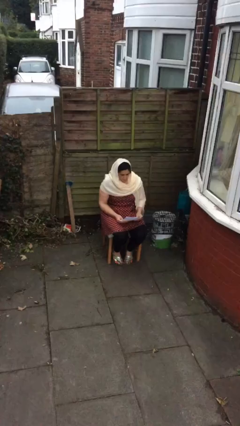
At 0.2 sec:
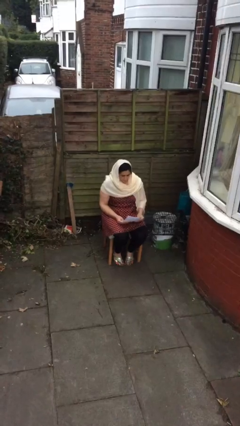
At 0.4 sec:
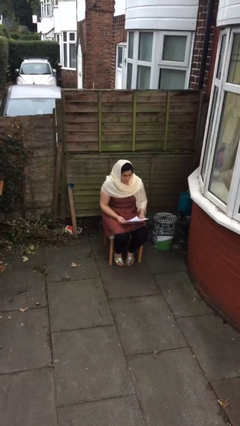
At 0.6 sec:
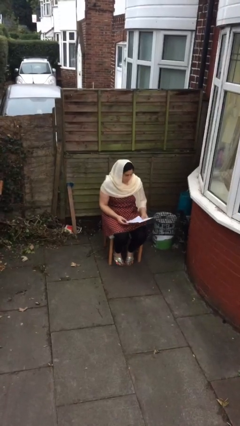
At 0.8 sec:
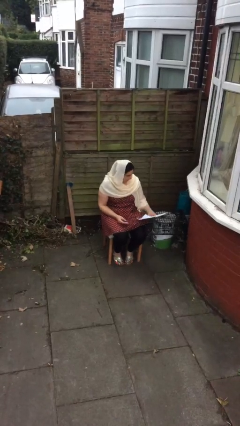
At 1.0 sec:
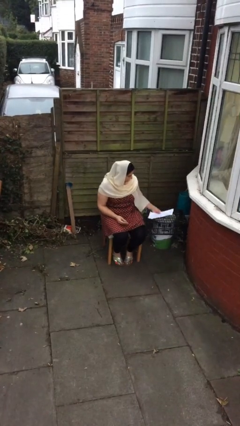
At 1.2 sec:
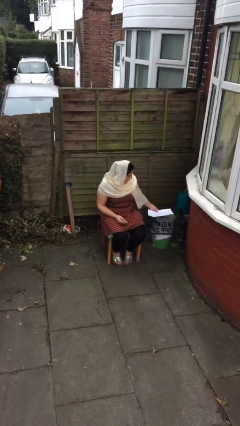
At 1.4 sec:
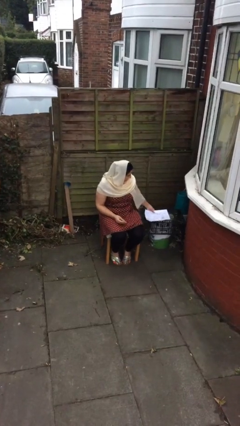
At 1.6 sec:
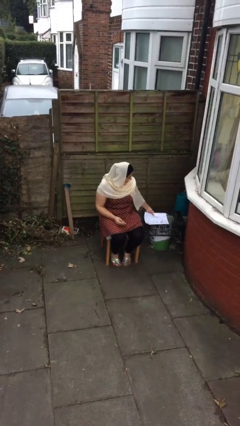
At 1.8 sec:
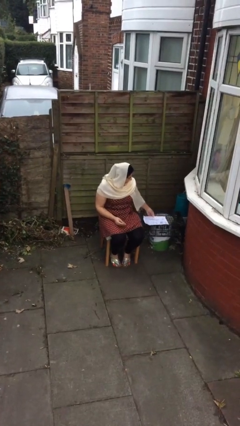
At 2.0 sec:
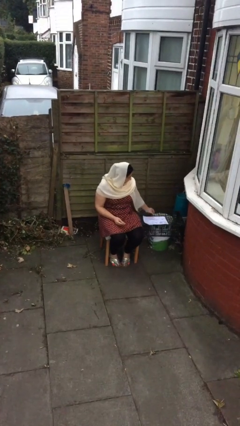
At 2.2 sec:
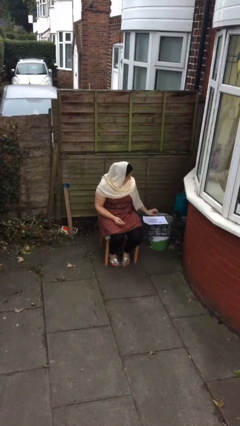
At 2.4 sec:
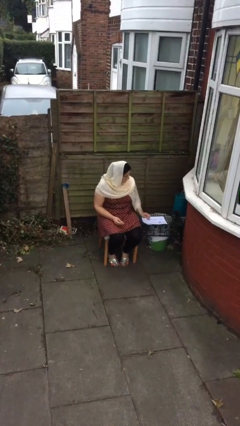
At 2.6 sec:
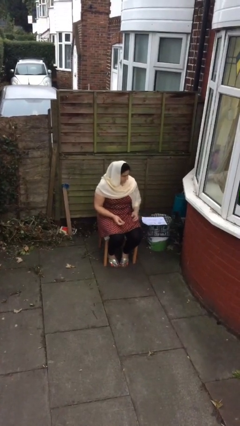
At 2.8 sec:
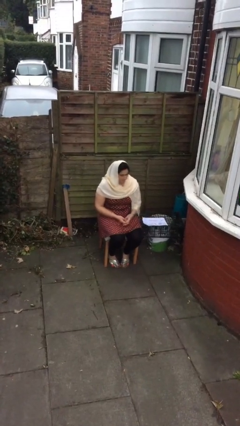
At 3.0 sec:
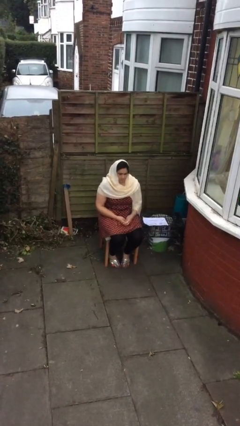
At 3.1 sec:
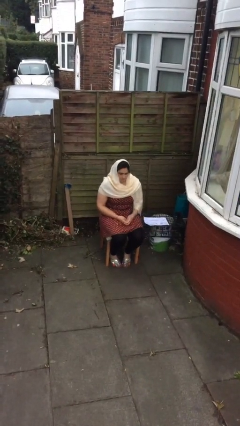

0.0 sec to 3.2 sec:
person puts down object on table

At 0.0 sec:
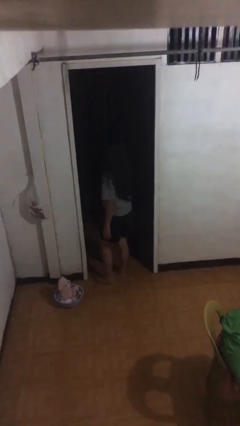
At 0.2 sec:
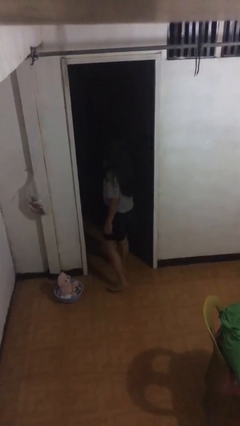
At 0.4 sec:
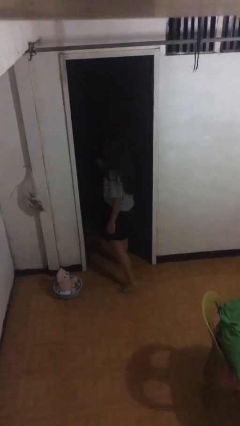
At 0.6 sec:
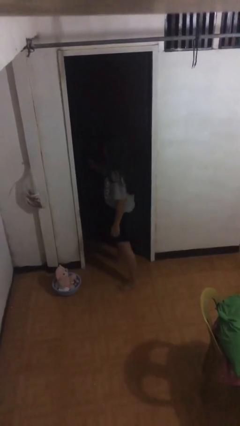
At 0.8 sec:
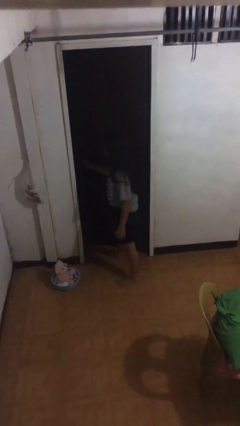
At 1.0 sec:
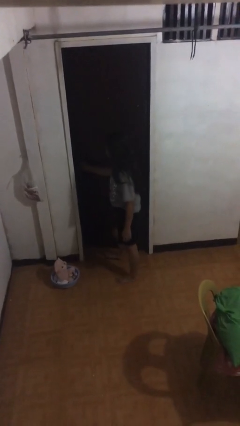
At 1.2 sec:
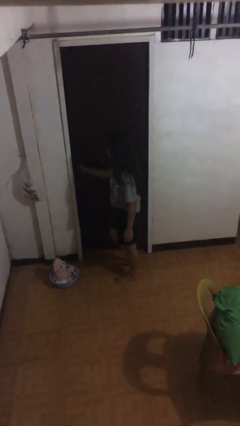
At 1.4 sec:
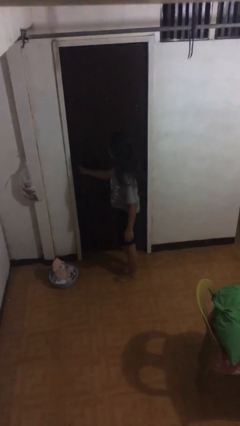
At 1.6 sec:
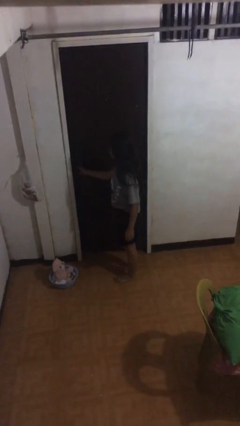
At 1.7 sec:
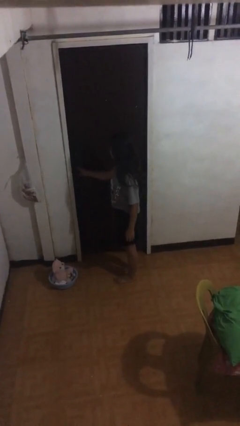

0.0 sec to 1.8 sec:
person closes facility door

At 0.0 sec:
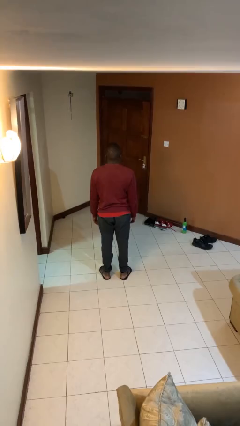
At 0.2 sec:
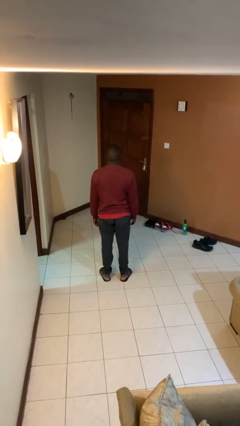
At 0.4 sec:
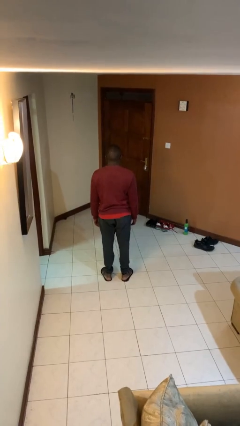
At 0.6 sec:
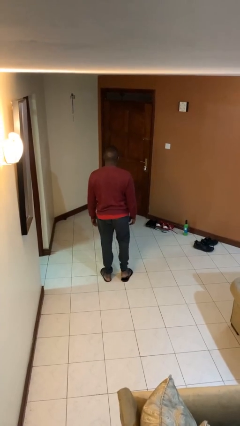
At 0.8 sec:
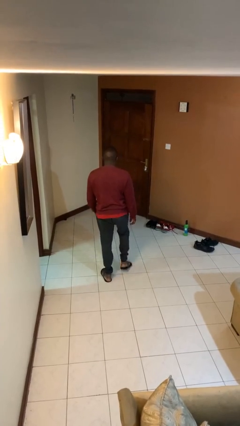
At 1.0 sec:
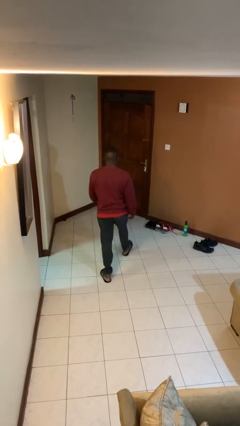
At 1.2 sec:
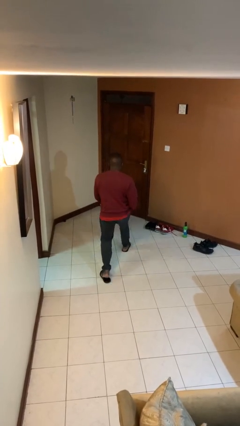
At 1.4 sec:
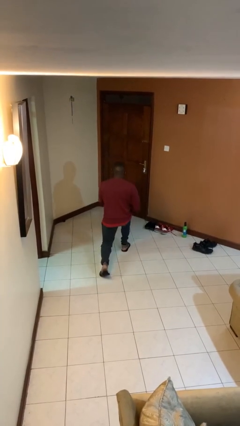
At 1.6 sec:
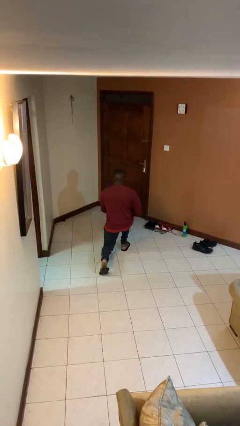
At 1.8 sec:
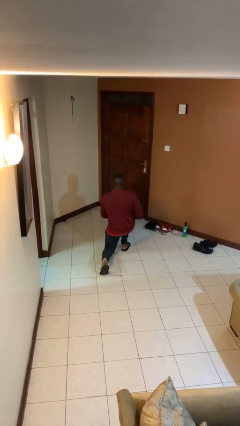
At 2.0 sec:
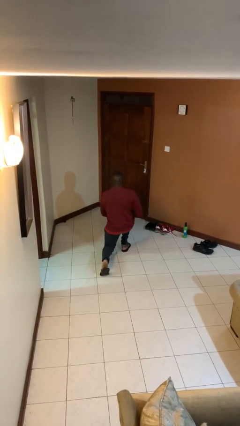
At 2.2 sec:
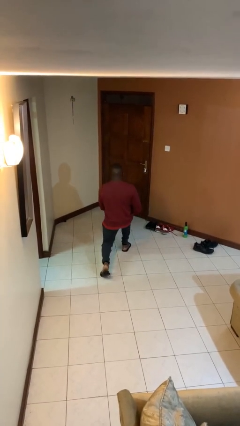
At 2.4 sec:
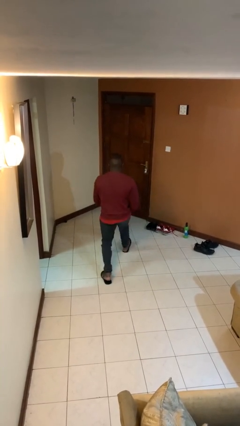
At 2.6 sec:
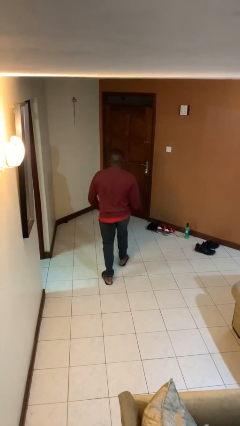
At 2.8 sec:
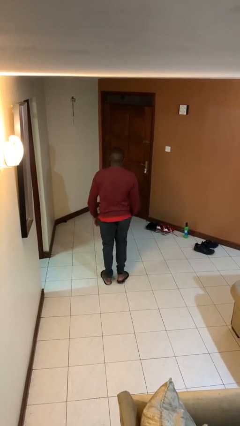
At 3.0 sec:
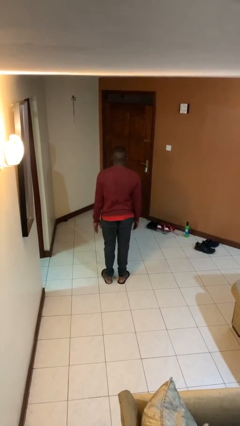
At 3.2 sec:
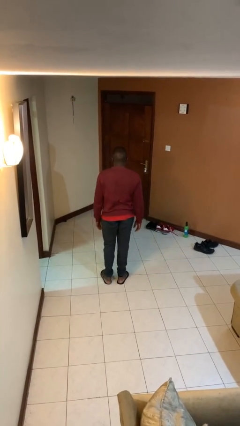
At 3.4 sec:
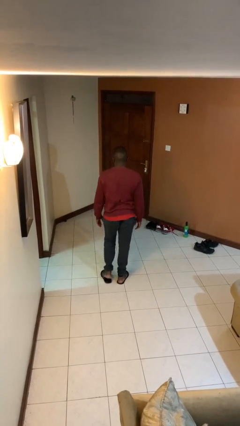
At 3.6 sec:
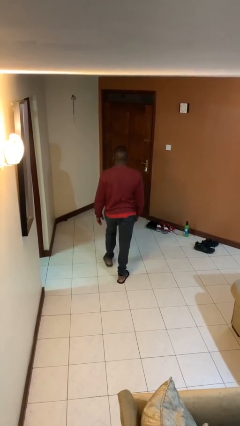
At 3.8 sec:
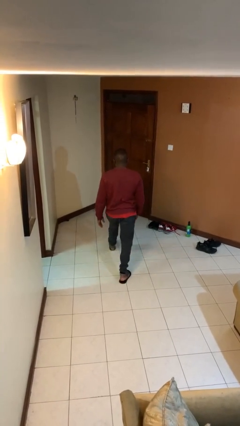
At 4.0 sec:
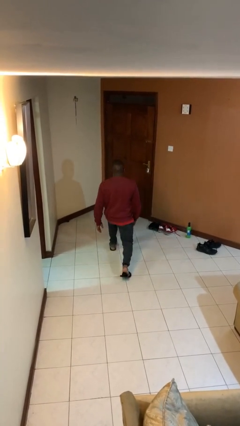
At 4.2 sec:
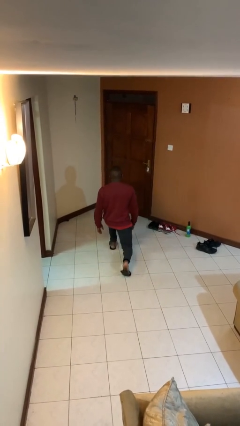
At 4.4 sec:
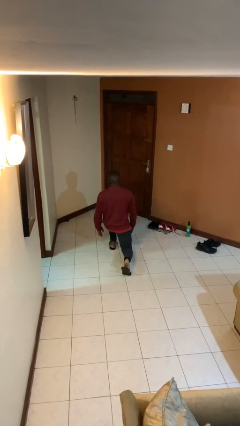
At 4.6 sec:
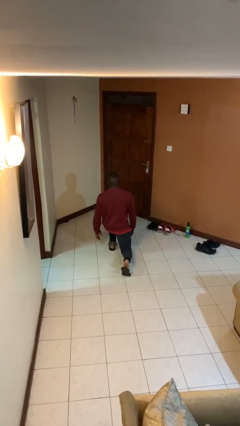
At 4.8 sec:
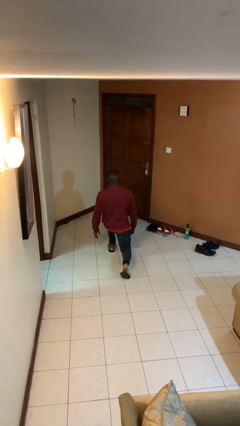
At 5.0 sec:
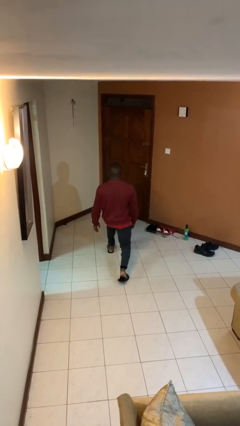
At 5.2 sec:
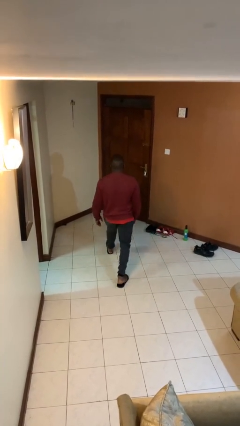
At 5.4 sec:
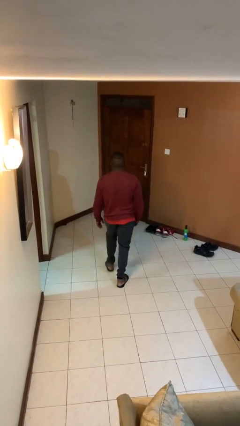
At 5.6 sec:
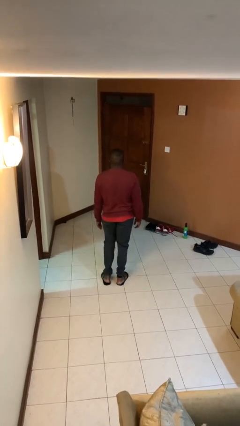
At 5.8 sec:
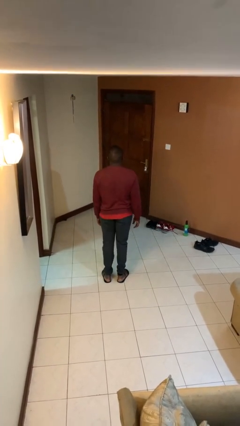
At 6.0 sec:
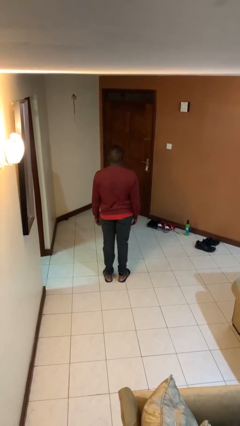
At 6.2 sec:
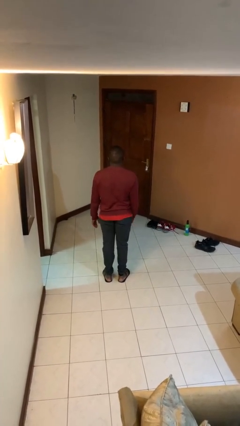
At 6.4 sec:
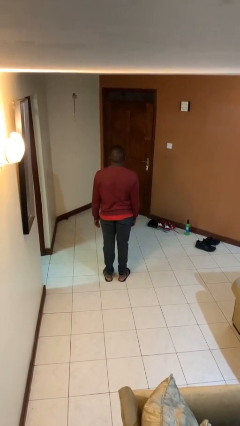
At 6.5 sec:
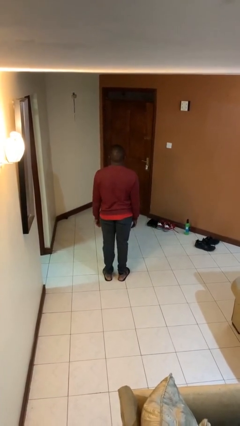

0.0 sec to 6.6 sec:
person exercises with lunges

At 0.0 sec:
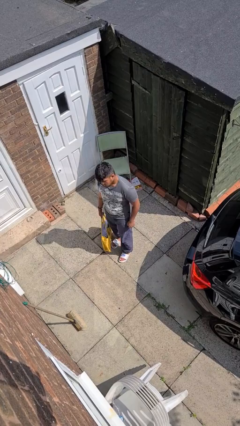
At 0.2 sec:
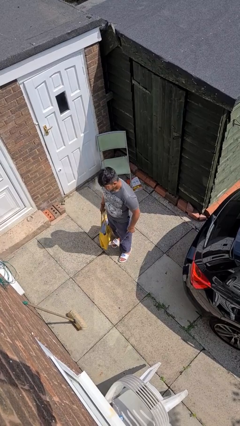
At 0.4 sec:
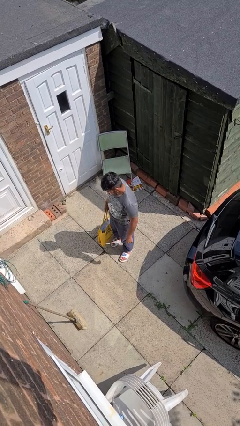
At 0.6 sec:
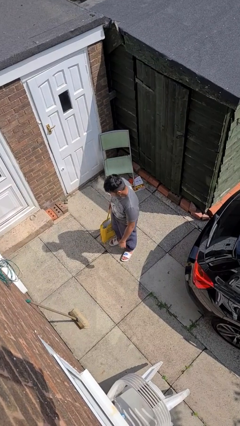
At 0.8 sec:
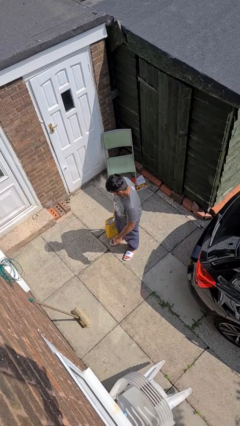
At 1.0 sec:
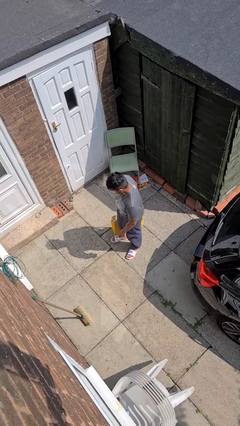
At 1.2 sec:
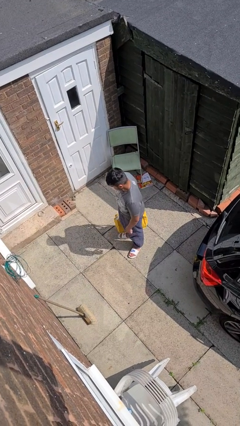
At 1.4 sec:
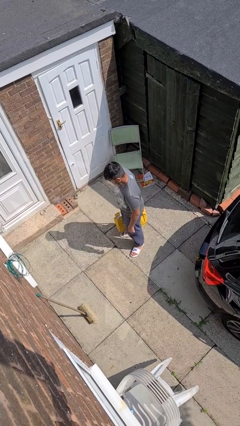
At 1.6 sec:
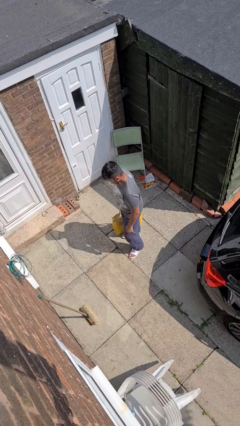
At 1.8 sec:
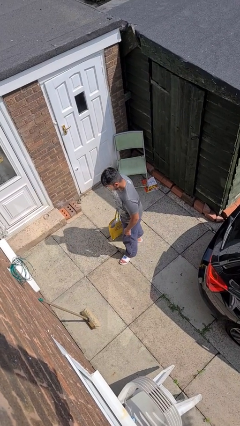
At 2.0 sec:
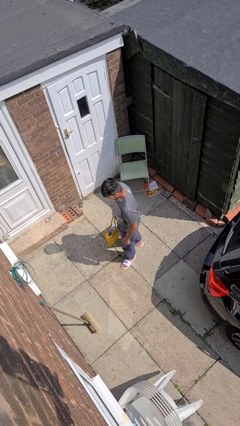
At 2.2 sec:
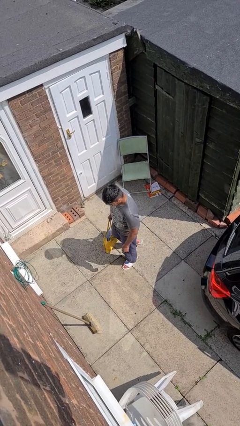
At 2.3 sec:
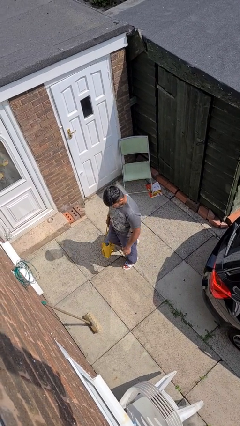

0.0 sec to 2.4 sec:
person carries groceries

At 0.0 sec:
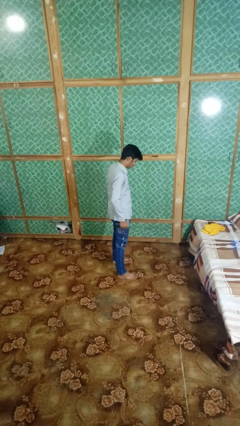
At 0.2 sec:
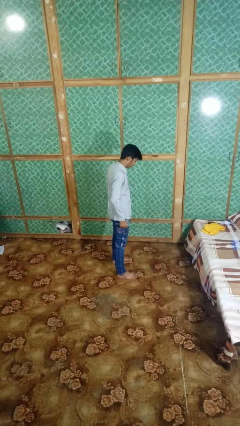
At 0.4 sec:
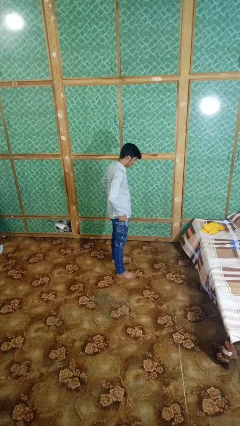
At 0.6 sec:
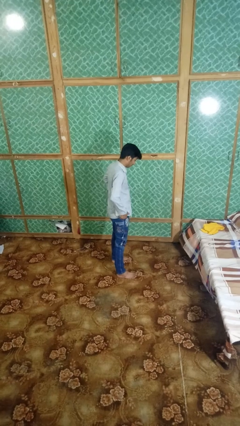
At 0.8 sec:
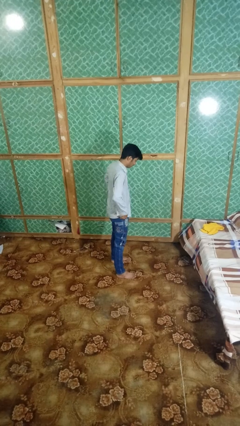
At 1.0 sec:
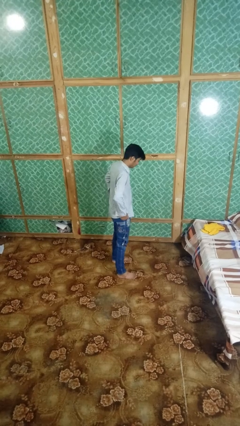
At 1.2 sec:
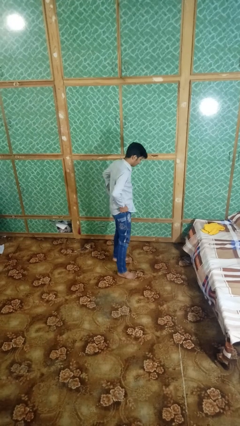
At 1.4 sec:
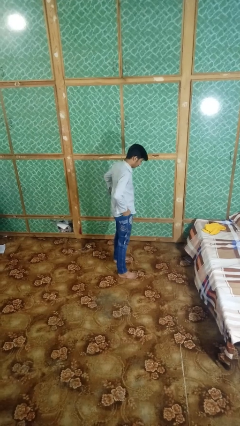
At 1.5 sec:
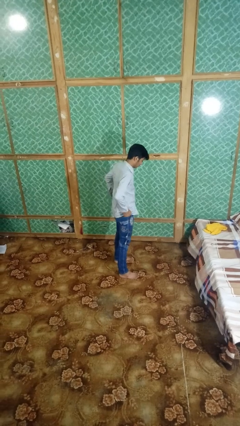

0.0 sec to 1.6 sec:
person hikes up pants

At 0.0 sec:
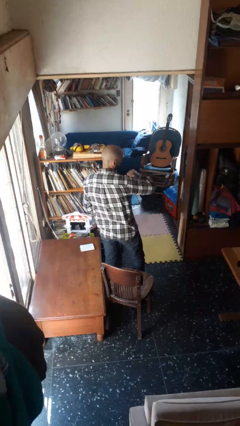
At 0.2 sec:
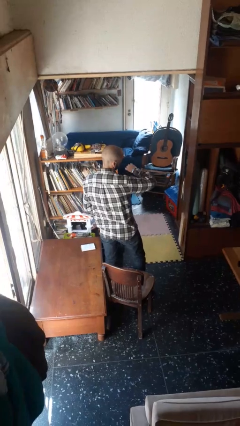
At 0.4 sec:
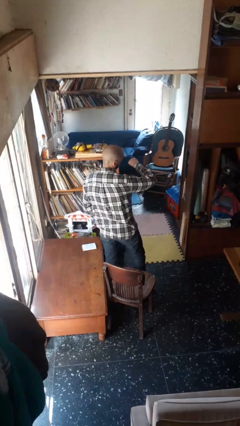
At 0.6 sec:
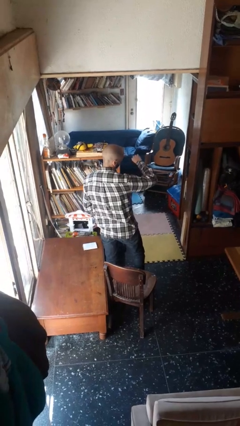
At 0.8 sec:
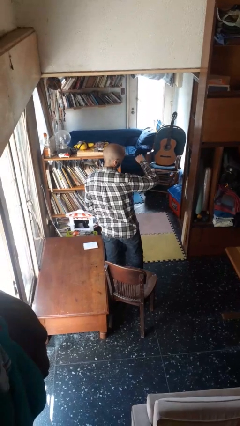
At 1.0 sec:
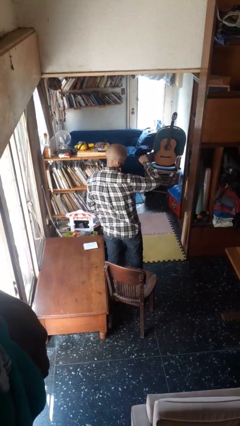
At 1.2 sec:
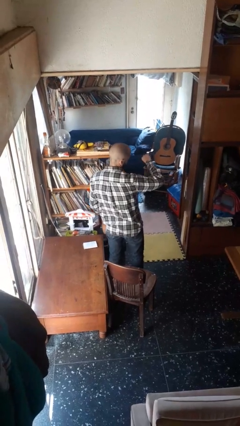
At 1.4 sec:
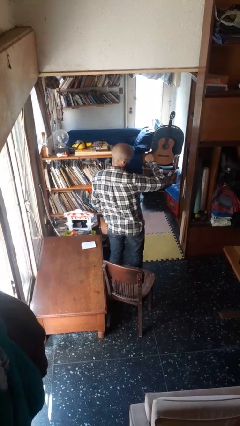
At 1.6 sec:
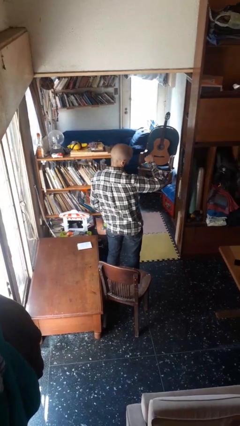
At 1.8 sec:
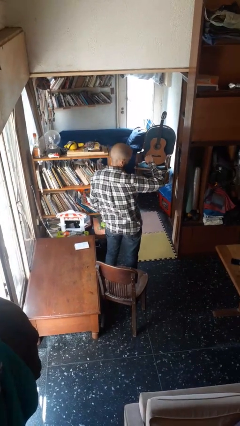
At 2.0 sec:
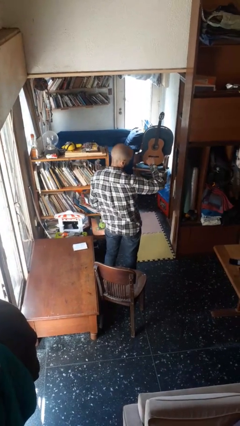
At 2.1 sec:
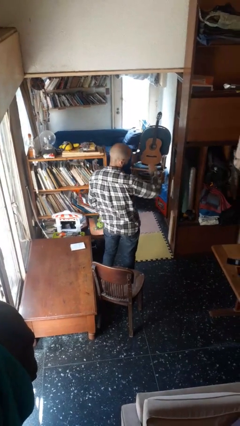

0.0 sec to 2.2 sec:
person looks at wristwatch
